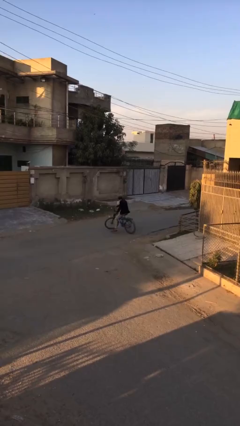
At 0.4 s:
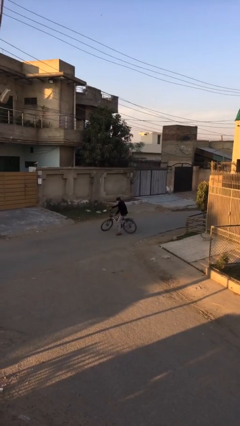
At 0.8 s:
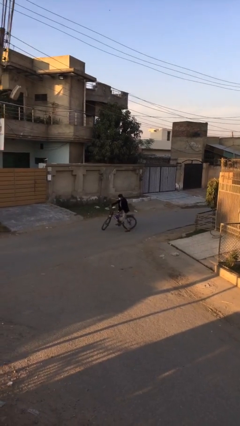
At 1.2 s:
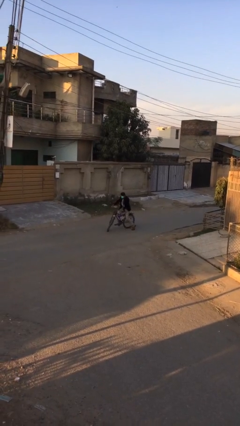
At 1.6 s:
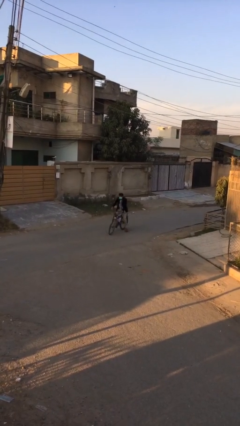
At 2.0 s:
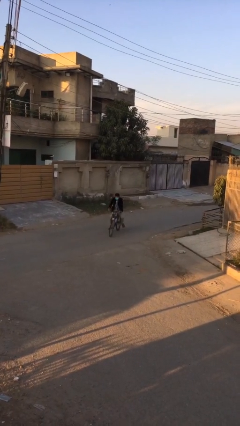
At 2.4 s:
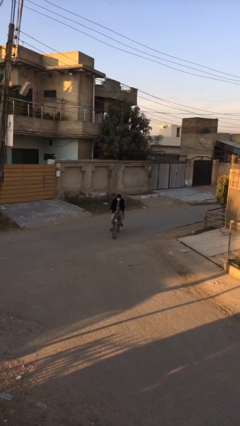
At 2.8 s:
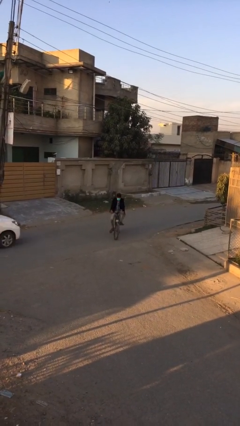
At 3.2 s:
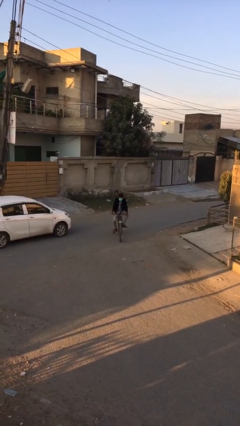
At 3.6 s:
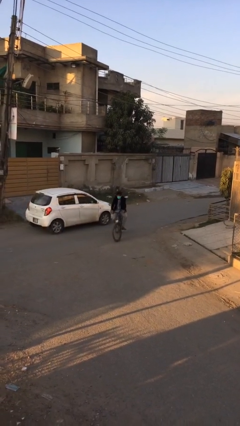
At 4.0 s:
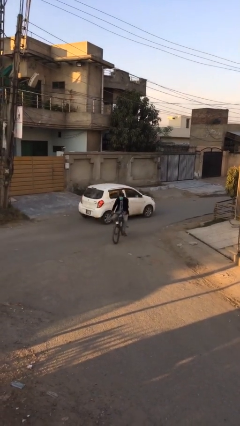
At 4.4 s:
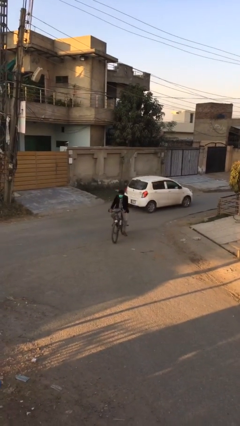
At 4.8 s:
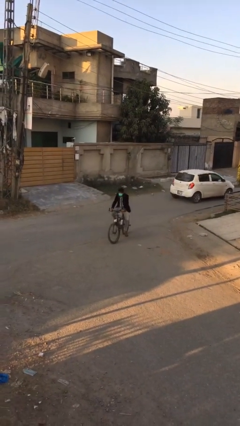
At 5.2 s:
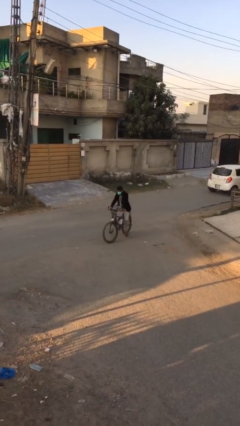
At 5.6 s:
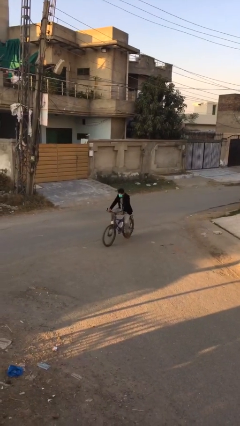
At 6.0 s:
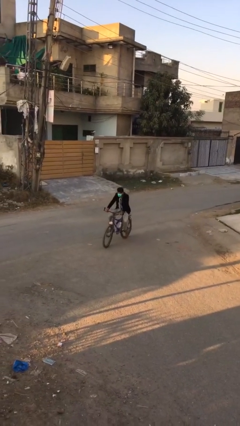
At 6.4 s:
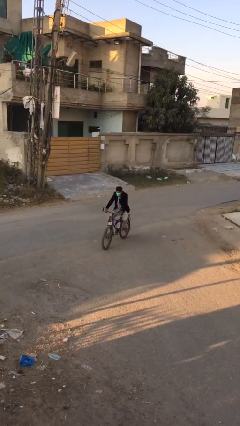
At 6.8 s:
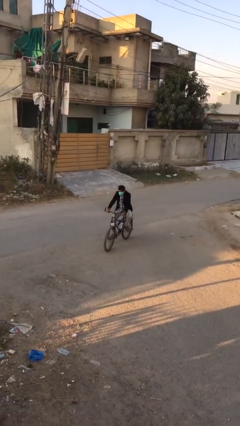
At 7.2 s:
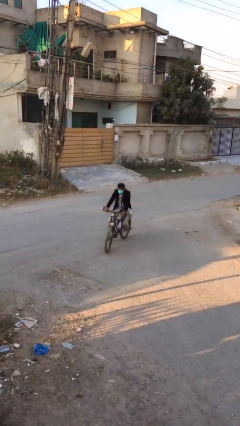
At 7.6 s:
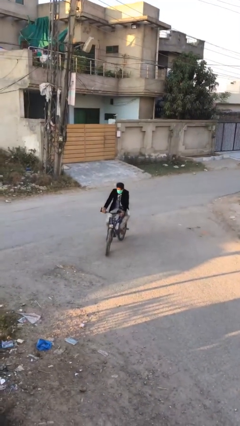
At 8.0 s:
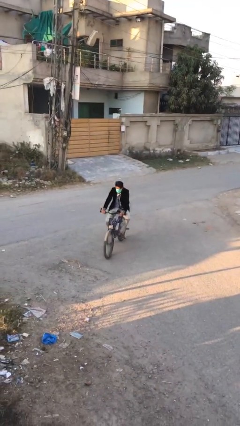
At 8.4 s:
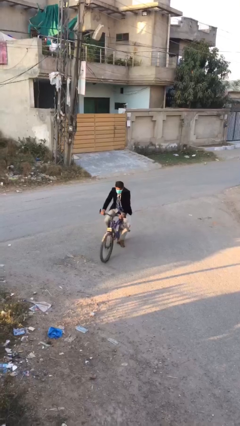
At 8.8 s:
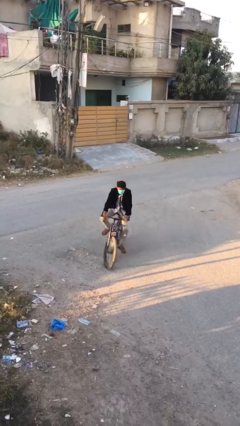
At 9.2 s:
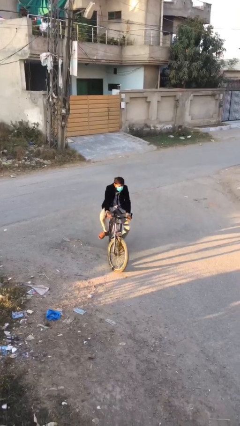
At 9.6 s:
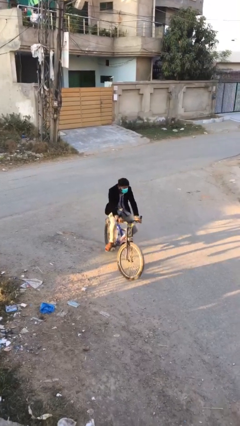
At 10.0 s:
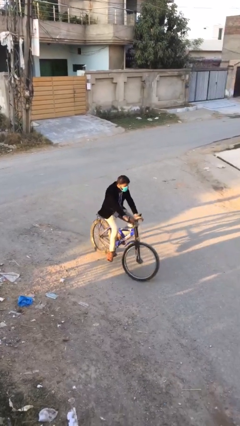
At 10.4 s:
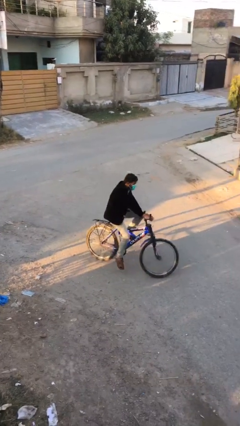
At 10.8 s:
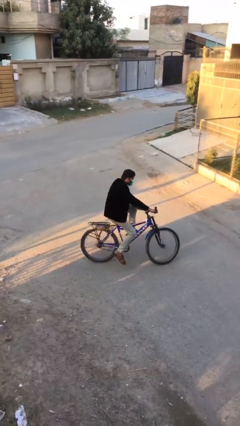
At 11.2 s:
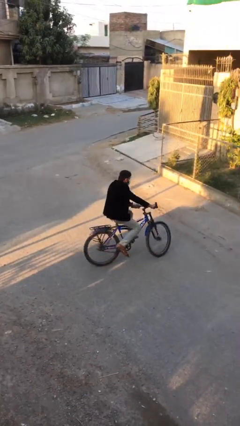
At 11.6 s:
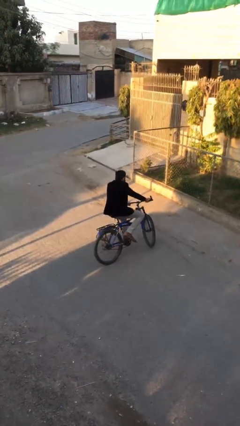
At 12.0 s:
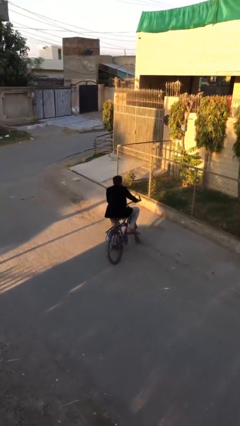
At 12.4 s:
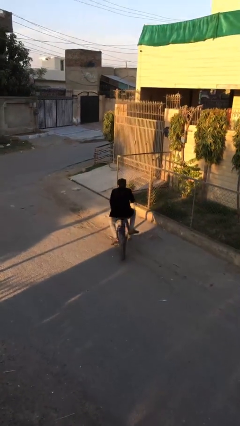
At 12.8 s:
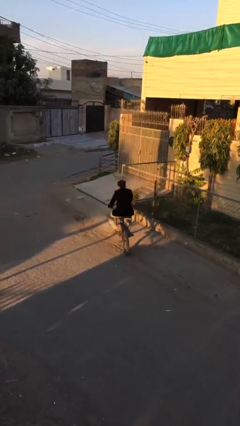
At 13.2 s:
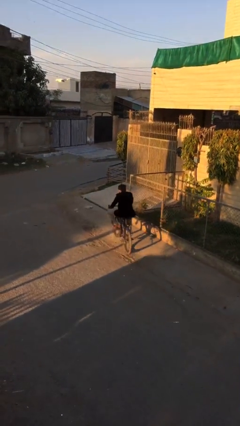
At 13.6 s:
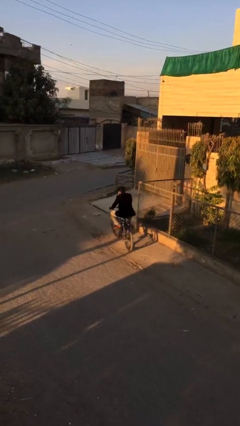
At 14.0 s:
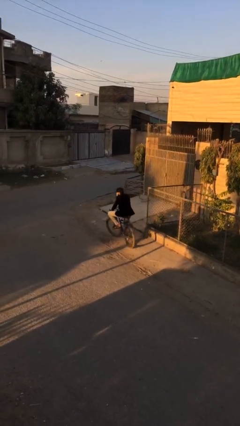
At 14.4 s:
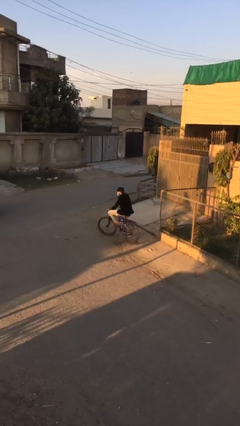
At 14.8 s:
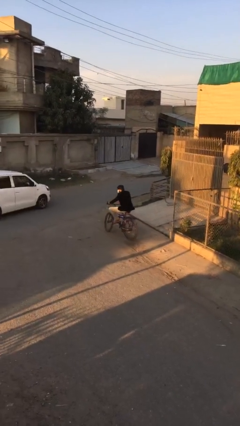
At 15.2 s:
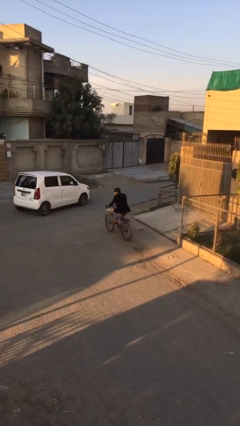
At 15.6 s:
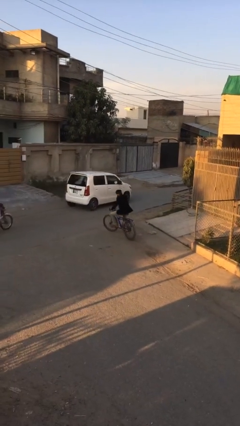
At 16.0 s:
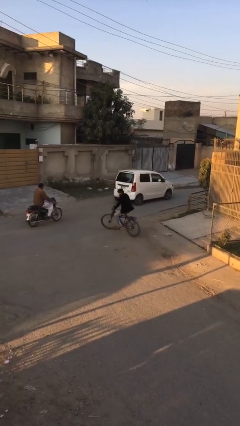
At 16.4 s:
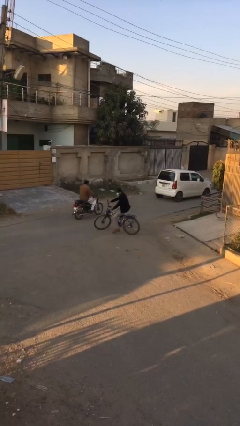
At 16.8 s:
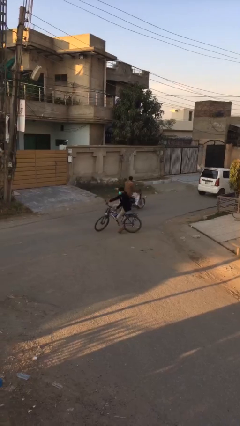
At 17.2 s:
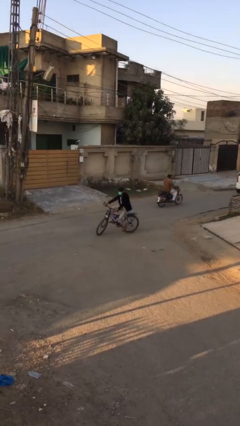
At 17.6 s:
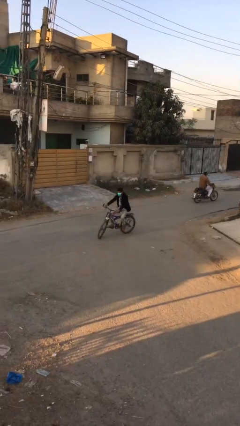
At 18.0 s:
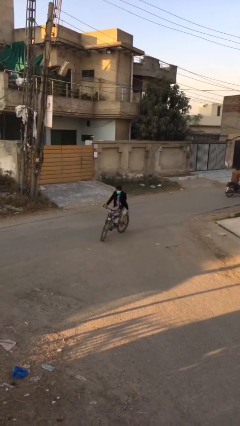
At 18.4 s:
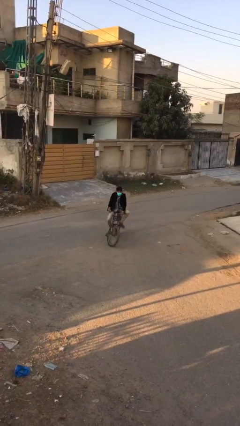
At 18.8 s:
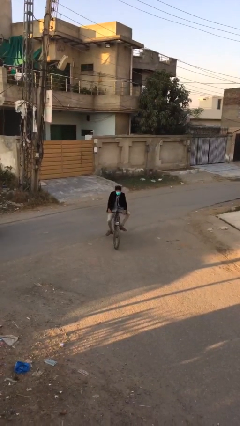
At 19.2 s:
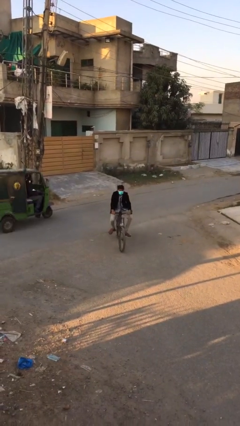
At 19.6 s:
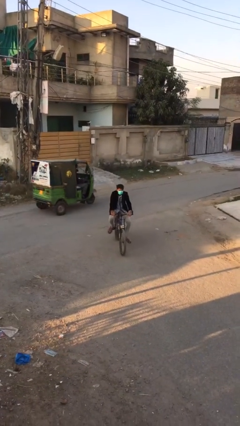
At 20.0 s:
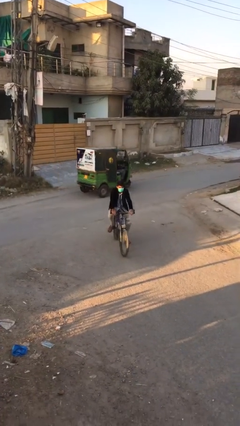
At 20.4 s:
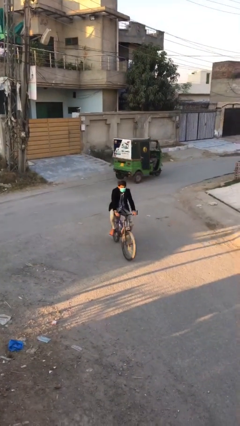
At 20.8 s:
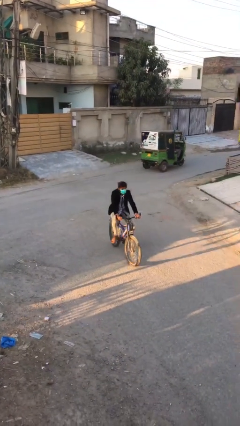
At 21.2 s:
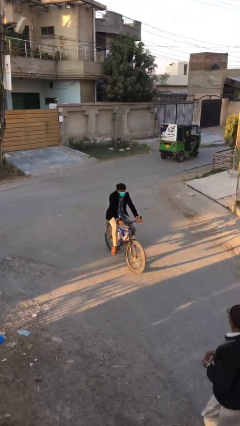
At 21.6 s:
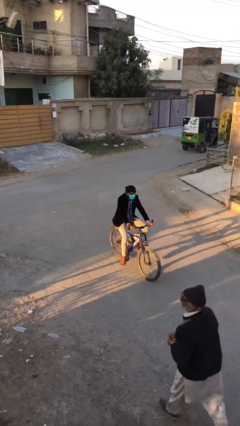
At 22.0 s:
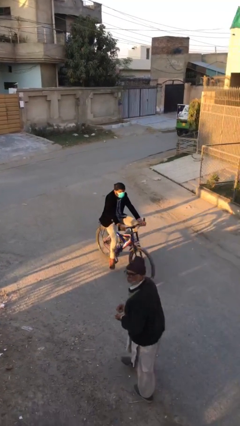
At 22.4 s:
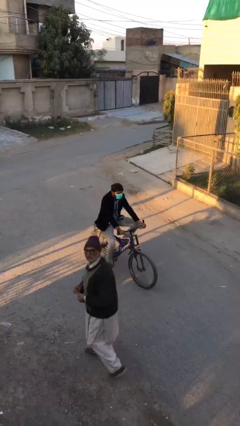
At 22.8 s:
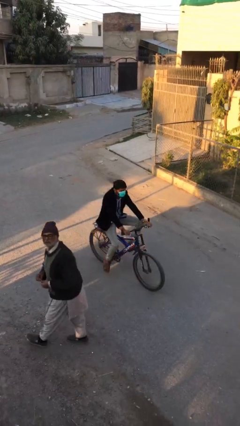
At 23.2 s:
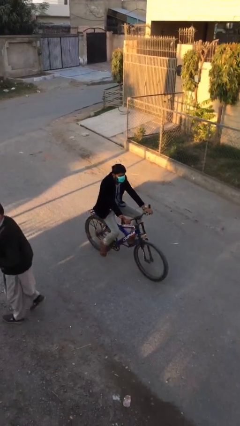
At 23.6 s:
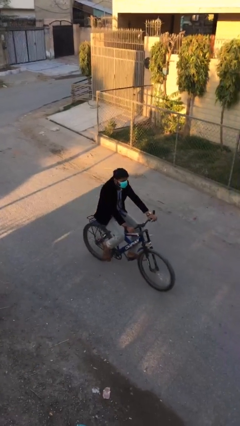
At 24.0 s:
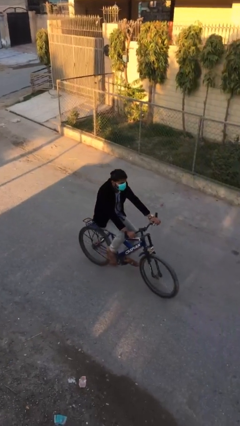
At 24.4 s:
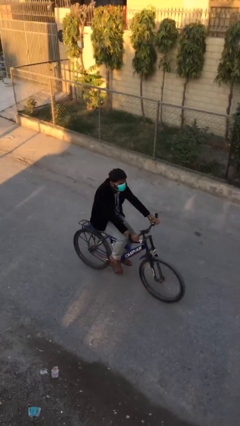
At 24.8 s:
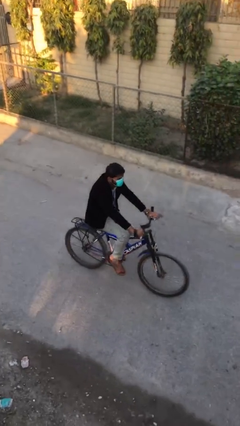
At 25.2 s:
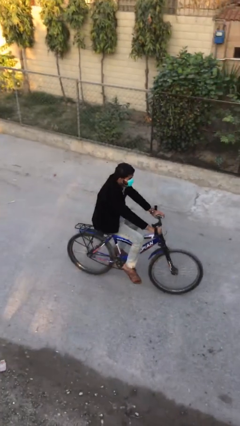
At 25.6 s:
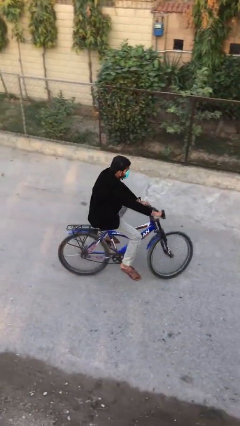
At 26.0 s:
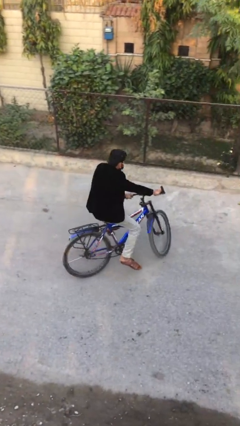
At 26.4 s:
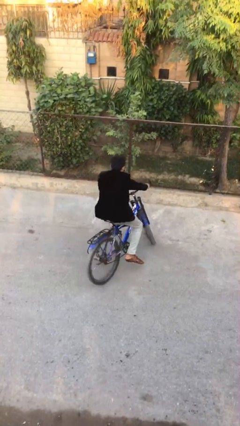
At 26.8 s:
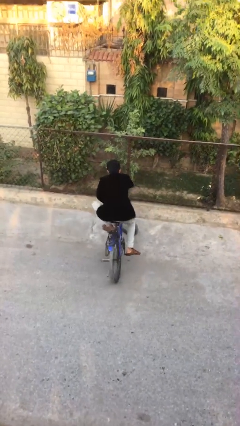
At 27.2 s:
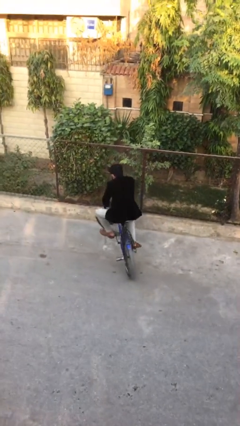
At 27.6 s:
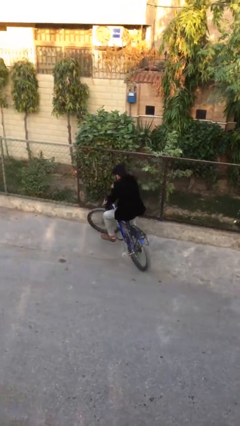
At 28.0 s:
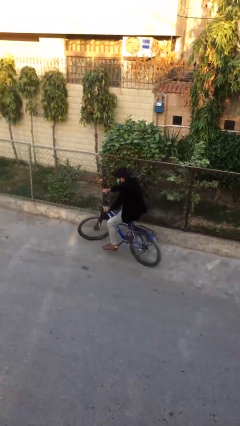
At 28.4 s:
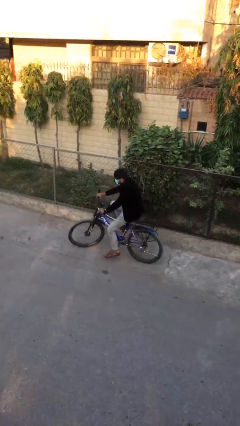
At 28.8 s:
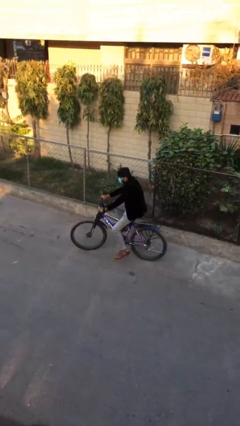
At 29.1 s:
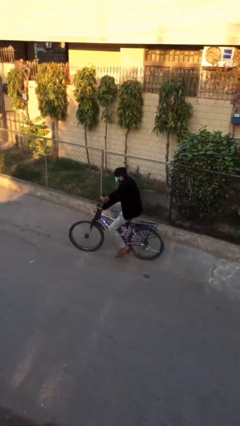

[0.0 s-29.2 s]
person rides bicycle

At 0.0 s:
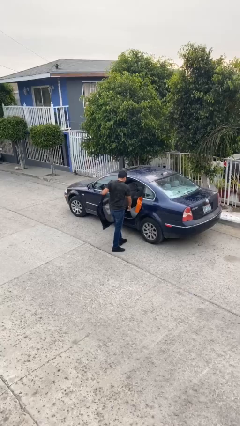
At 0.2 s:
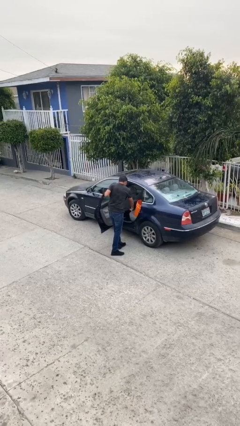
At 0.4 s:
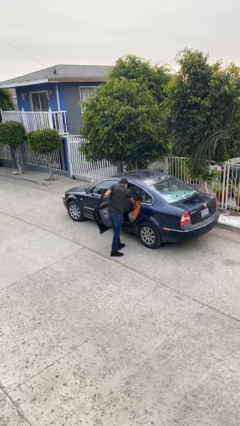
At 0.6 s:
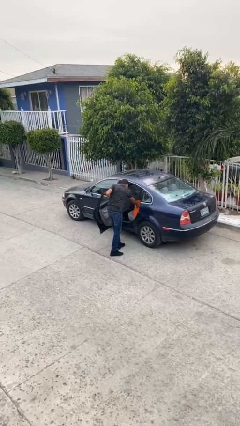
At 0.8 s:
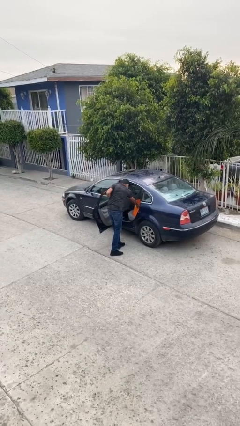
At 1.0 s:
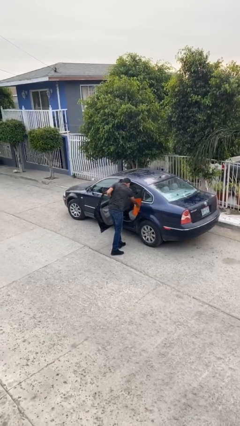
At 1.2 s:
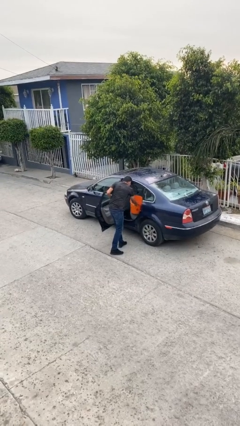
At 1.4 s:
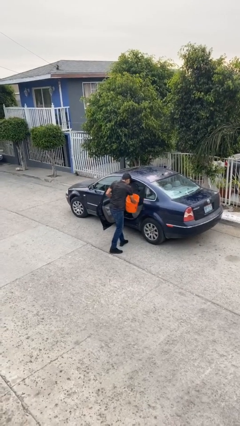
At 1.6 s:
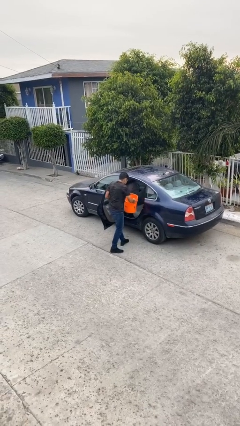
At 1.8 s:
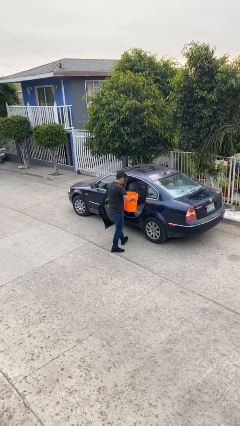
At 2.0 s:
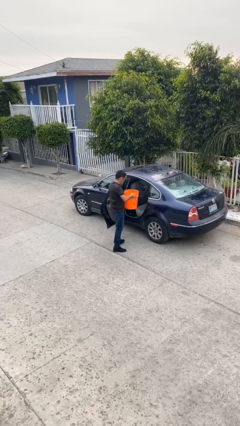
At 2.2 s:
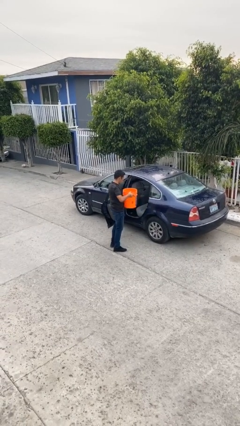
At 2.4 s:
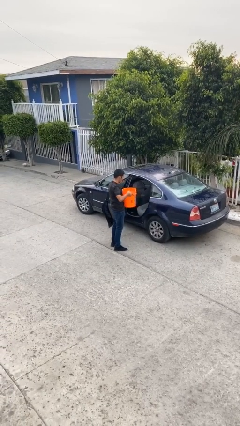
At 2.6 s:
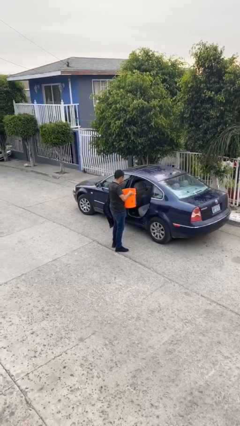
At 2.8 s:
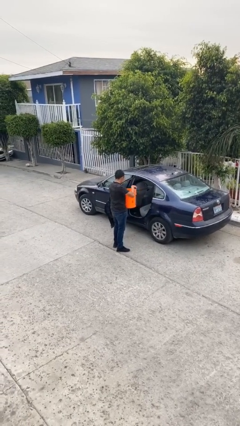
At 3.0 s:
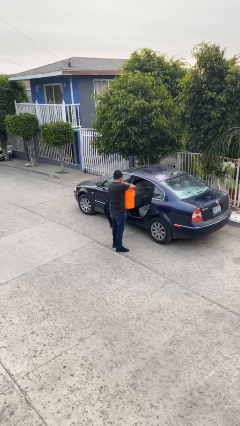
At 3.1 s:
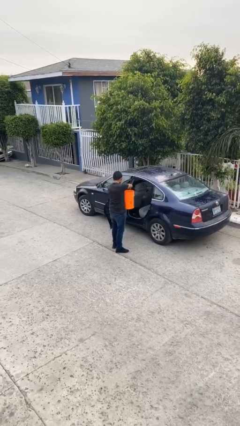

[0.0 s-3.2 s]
person unloads car

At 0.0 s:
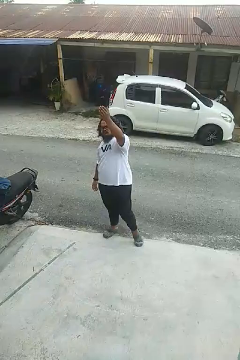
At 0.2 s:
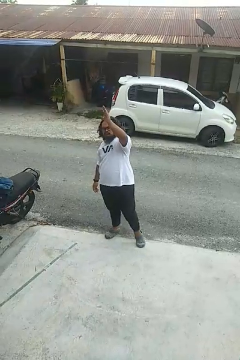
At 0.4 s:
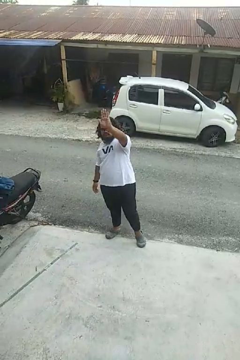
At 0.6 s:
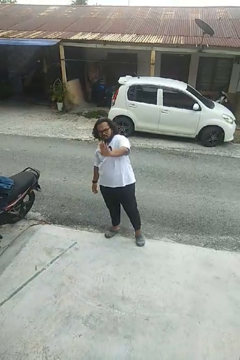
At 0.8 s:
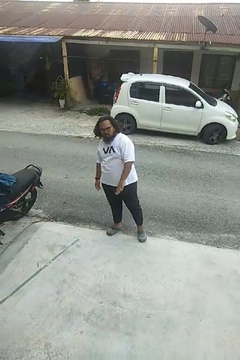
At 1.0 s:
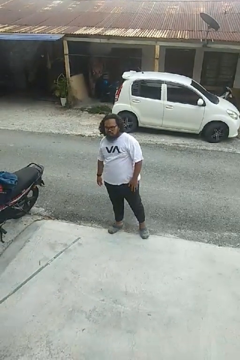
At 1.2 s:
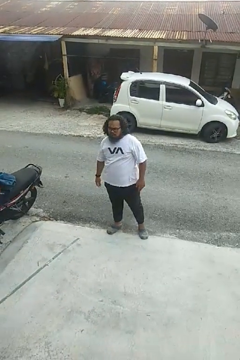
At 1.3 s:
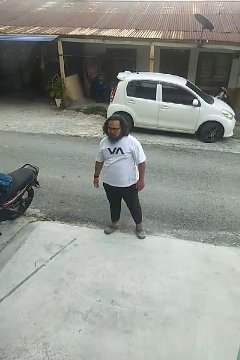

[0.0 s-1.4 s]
person gestures swipe down
